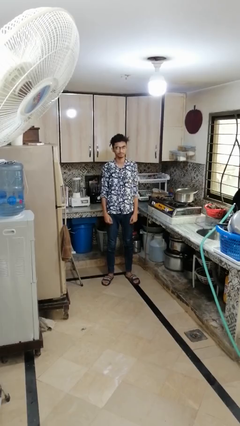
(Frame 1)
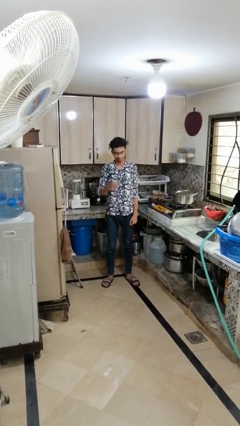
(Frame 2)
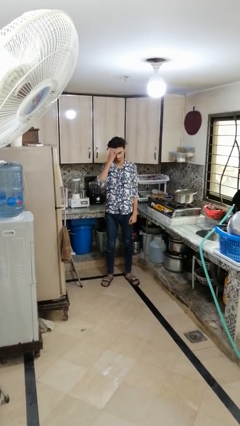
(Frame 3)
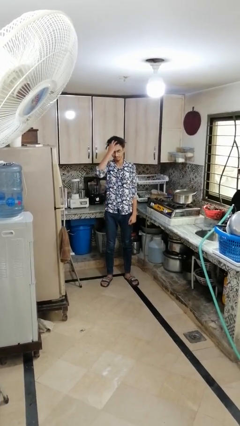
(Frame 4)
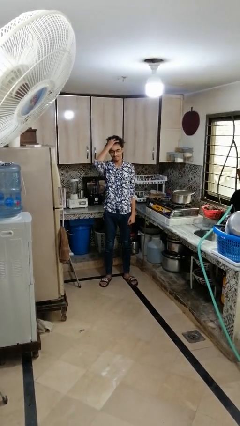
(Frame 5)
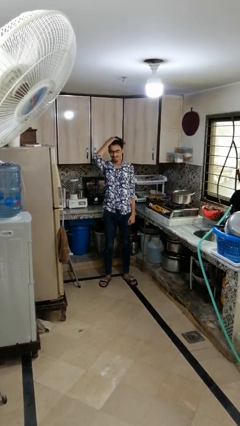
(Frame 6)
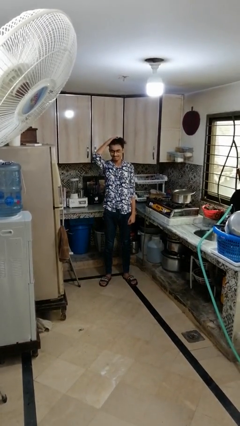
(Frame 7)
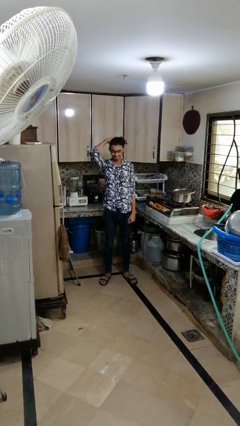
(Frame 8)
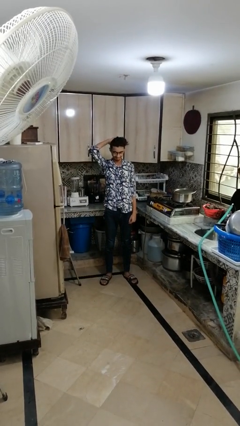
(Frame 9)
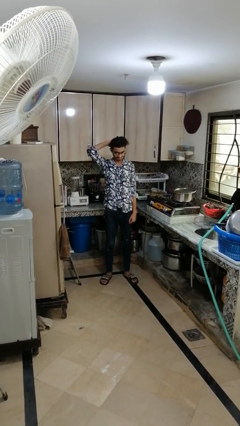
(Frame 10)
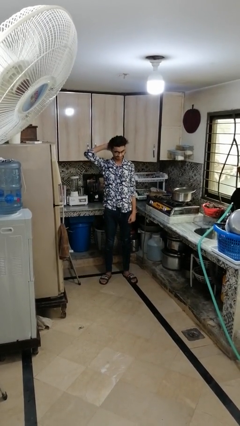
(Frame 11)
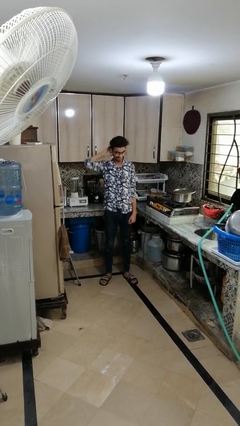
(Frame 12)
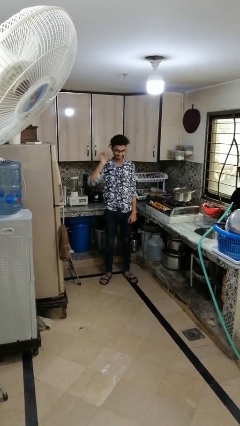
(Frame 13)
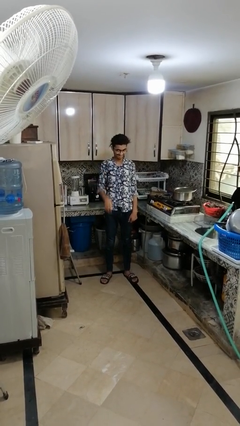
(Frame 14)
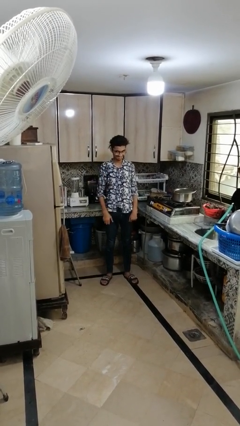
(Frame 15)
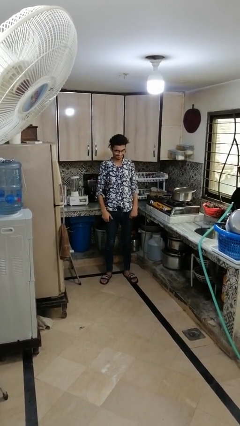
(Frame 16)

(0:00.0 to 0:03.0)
person strokes hair

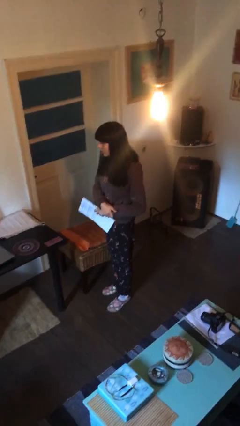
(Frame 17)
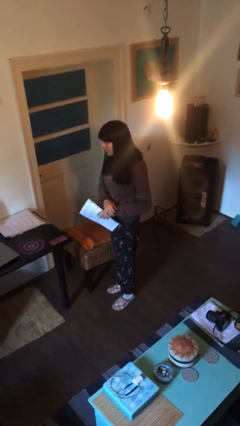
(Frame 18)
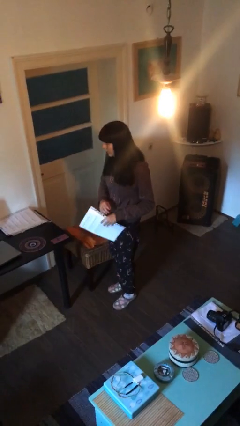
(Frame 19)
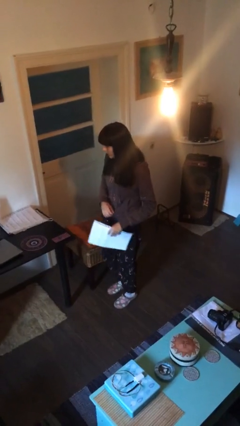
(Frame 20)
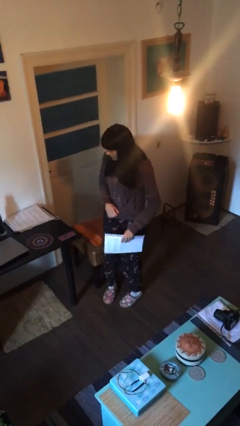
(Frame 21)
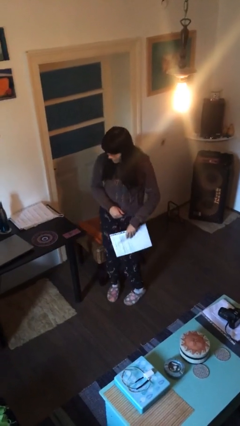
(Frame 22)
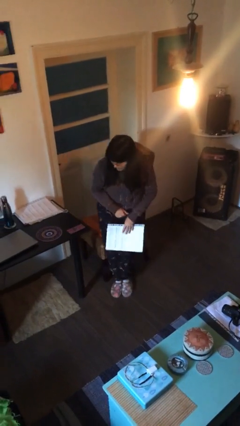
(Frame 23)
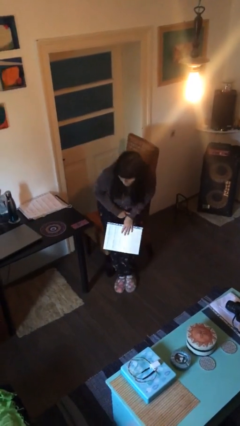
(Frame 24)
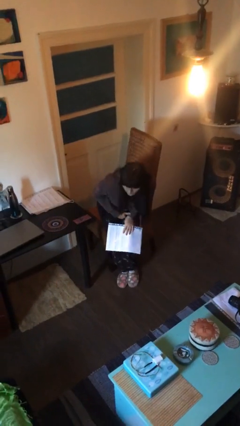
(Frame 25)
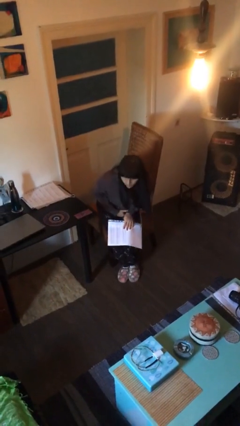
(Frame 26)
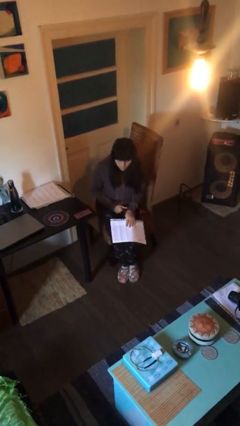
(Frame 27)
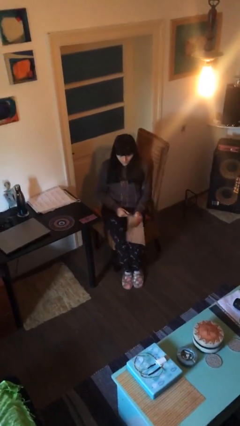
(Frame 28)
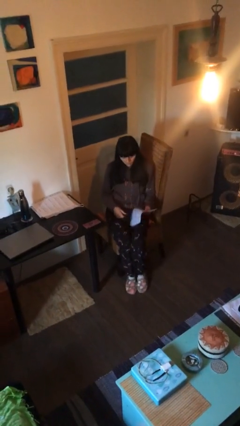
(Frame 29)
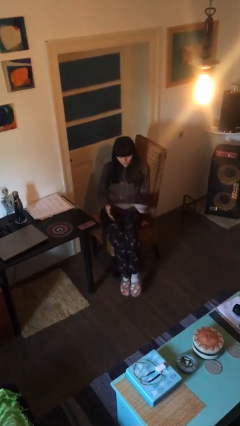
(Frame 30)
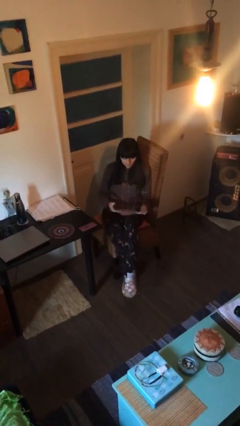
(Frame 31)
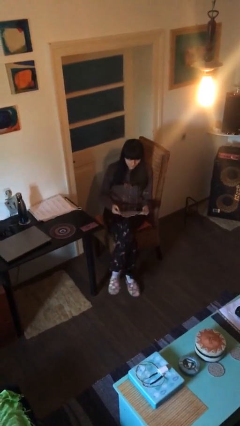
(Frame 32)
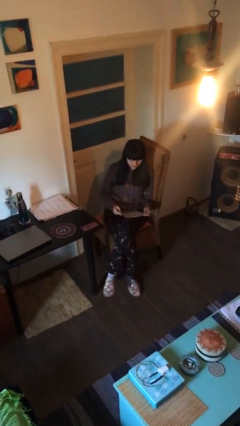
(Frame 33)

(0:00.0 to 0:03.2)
person sits down

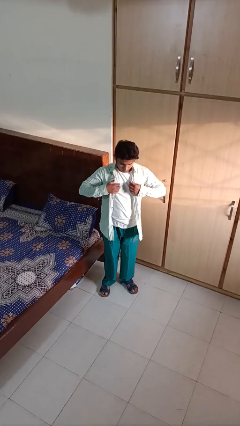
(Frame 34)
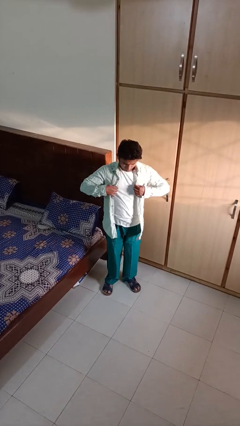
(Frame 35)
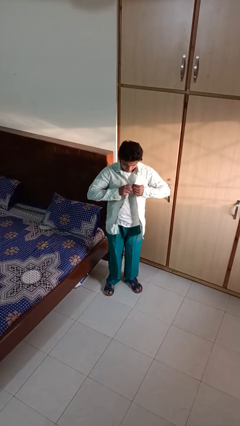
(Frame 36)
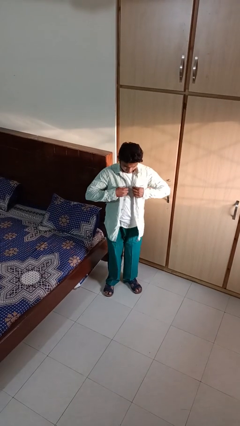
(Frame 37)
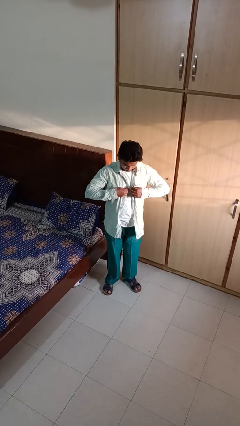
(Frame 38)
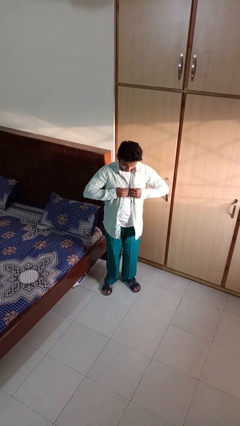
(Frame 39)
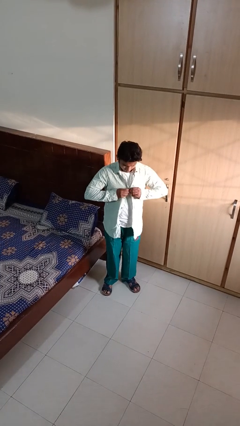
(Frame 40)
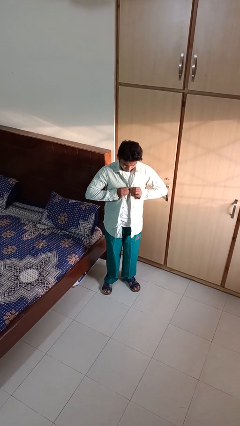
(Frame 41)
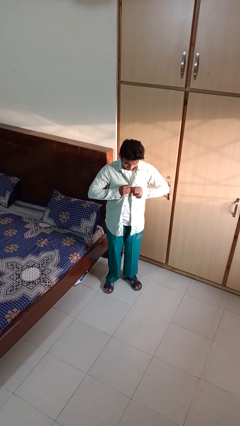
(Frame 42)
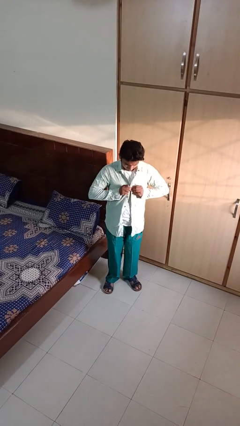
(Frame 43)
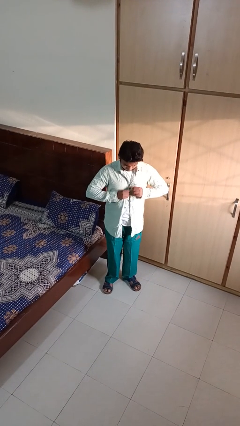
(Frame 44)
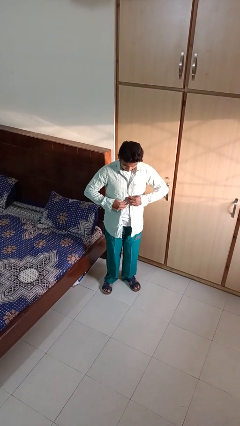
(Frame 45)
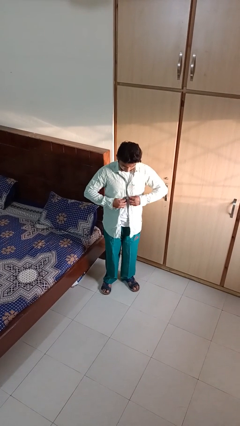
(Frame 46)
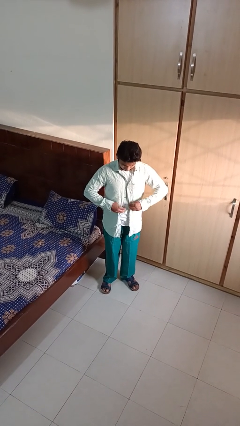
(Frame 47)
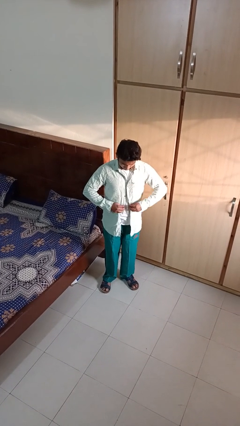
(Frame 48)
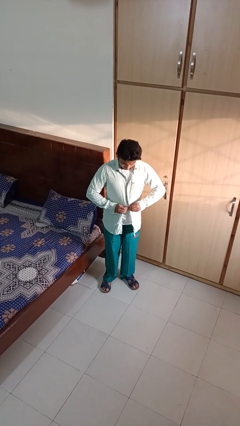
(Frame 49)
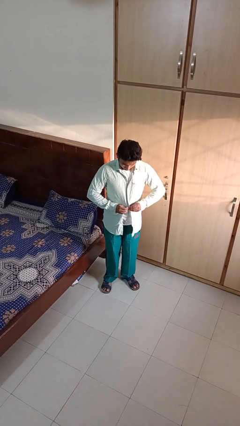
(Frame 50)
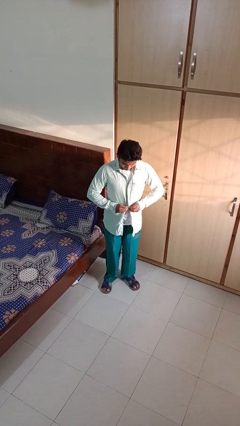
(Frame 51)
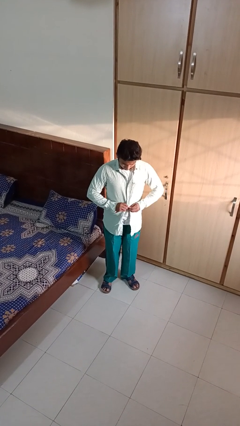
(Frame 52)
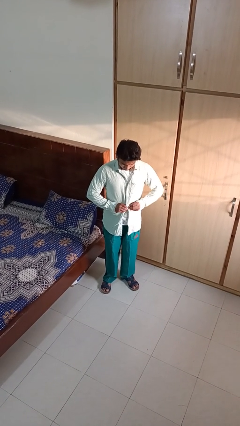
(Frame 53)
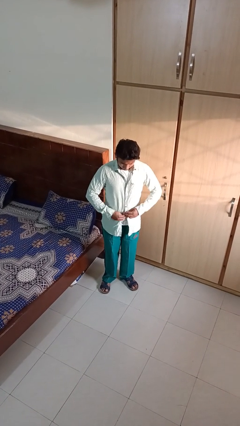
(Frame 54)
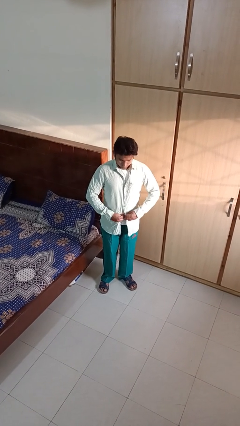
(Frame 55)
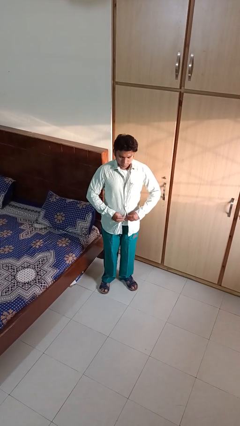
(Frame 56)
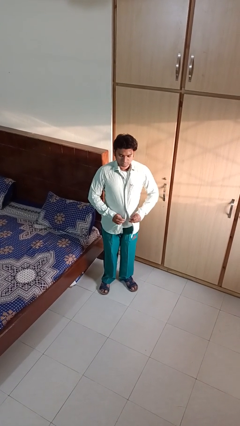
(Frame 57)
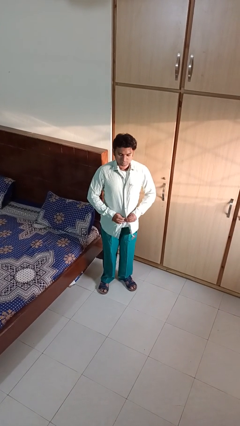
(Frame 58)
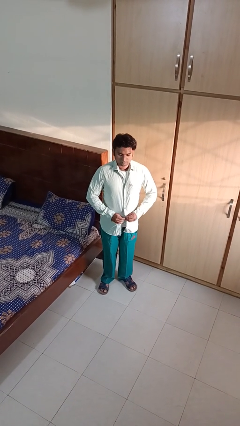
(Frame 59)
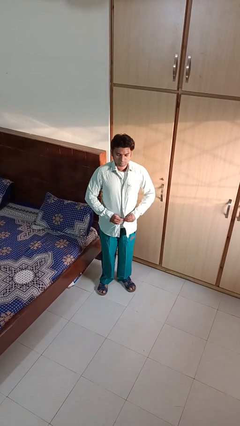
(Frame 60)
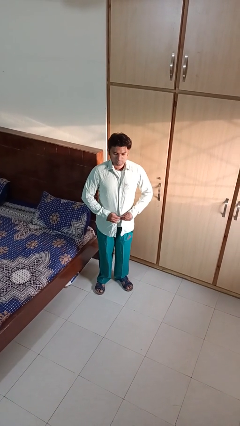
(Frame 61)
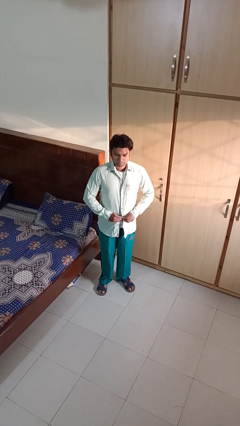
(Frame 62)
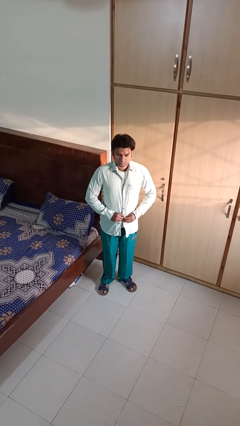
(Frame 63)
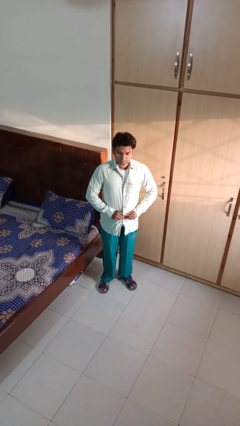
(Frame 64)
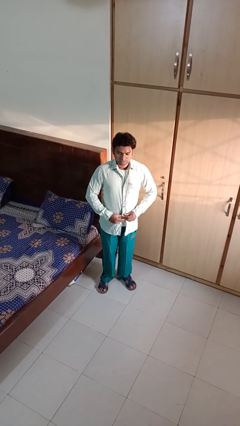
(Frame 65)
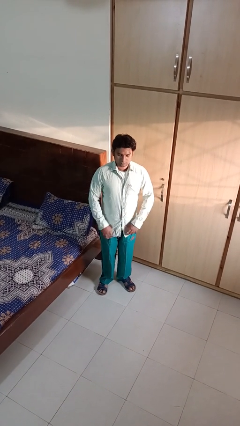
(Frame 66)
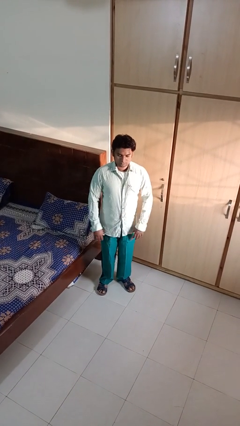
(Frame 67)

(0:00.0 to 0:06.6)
person buttons shirt

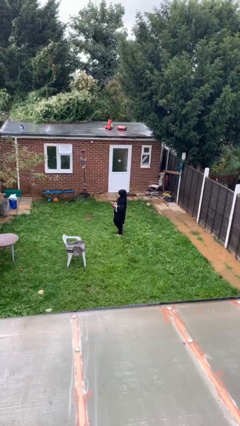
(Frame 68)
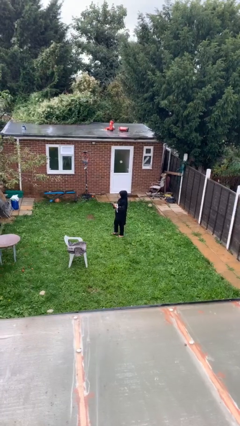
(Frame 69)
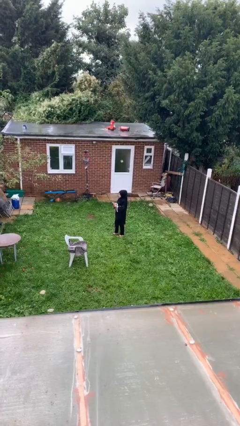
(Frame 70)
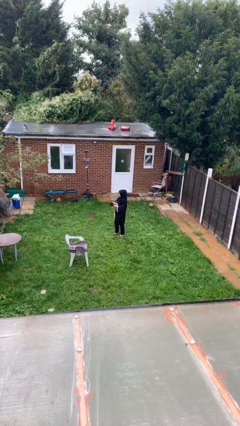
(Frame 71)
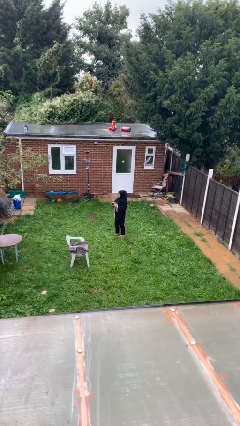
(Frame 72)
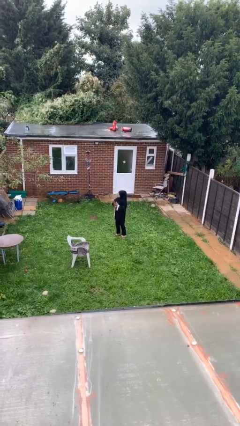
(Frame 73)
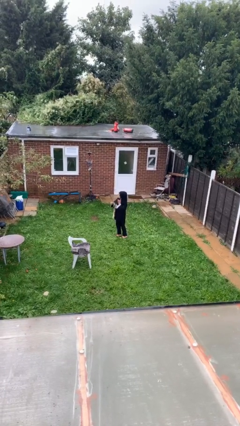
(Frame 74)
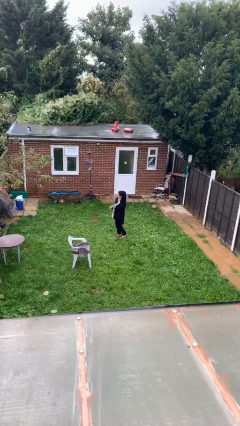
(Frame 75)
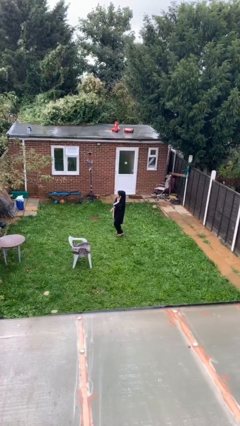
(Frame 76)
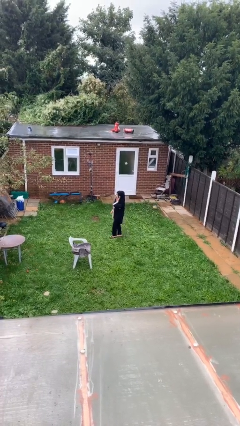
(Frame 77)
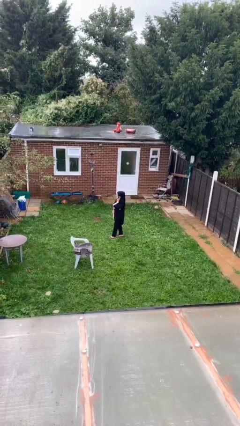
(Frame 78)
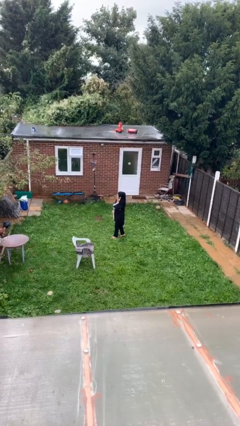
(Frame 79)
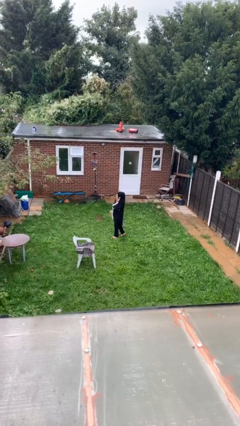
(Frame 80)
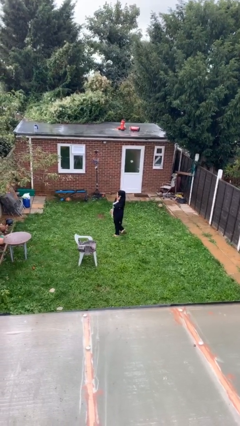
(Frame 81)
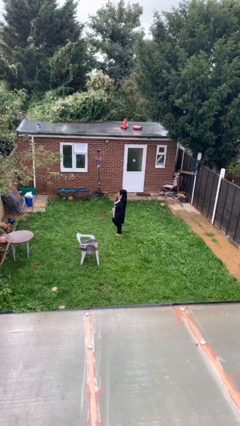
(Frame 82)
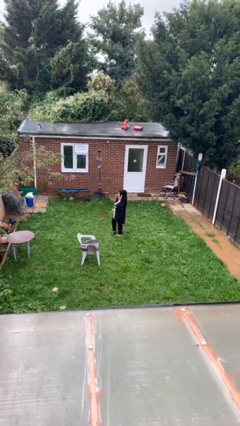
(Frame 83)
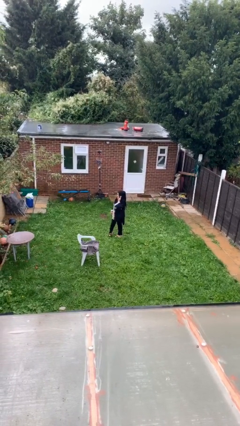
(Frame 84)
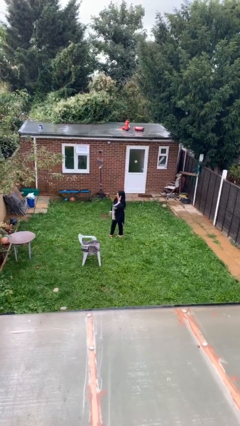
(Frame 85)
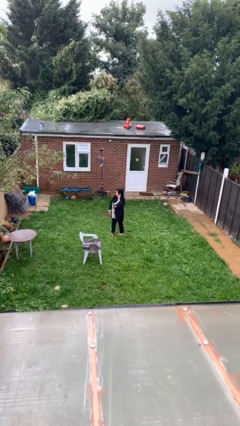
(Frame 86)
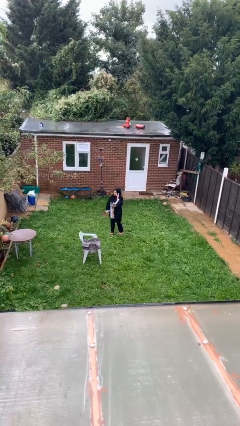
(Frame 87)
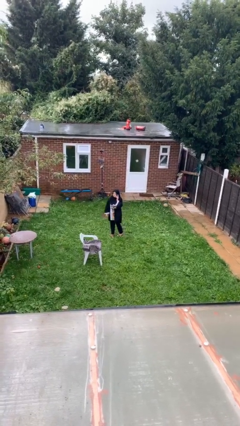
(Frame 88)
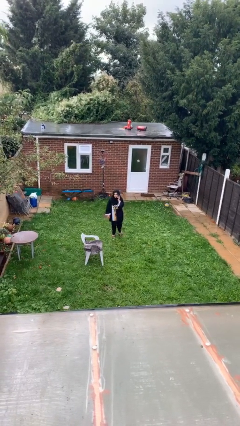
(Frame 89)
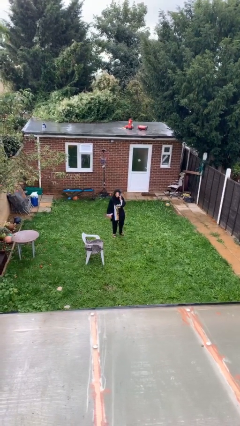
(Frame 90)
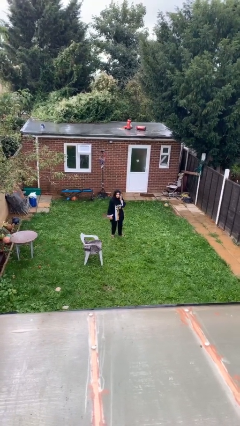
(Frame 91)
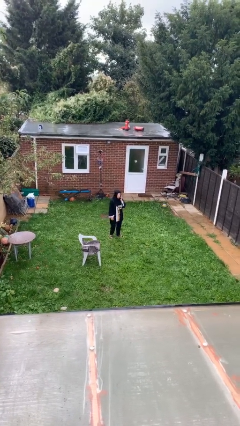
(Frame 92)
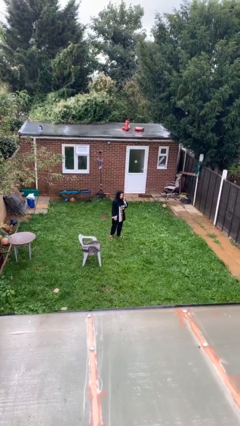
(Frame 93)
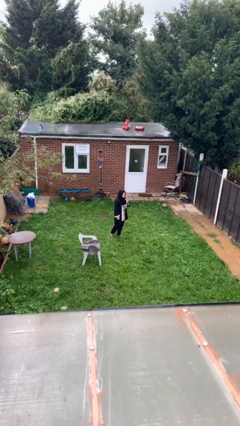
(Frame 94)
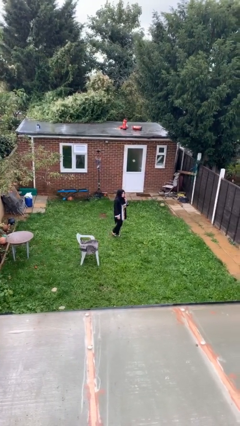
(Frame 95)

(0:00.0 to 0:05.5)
person talks on phone
